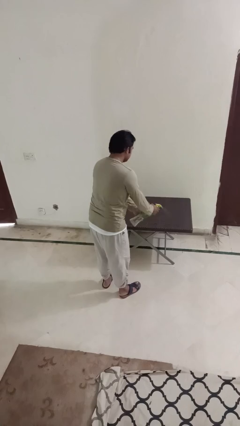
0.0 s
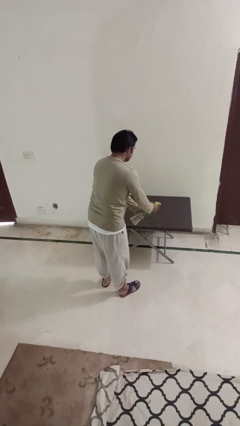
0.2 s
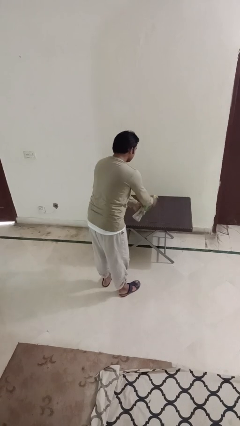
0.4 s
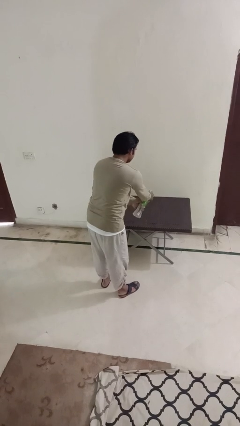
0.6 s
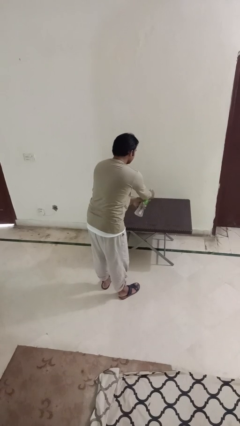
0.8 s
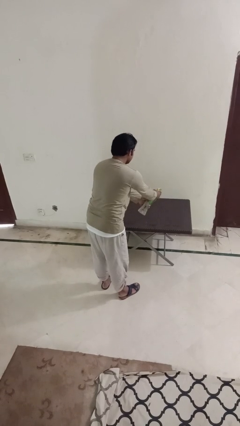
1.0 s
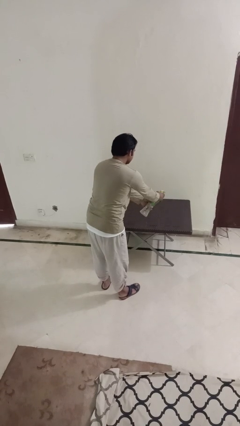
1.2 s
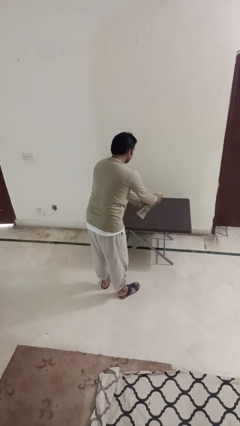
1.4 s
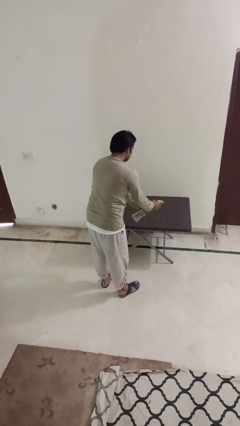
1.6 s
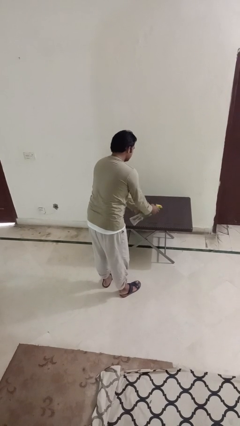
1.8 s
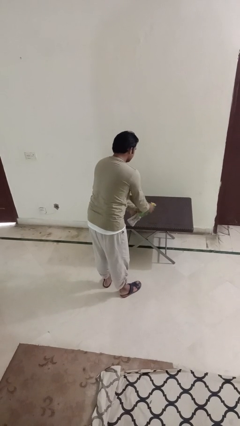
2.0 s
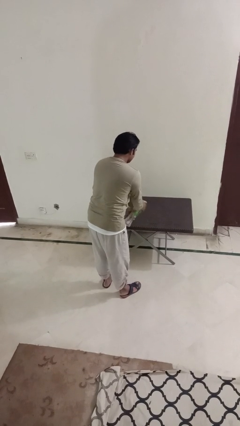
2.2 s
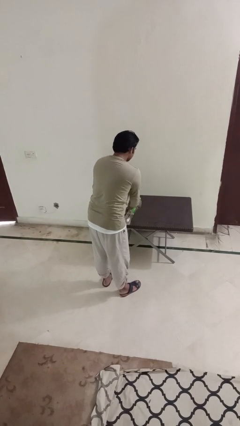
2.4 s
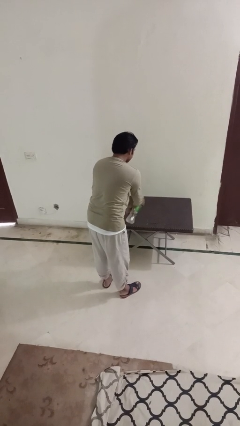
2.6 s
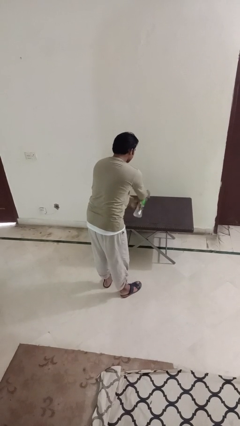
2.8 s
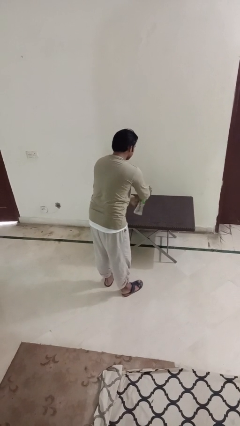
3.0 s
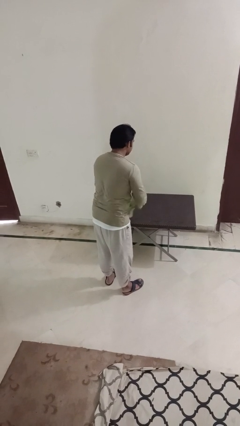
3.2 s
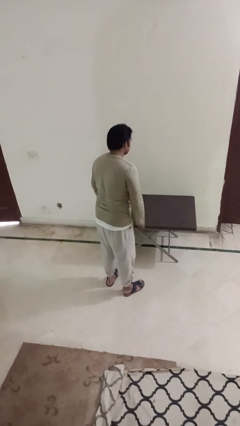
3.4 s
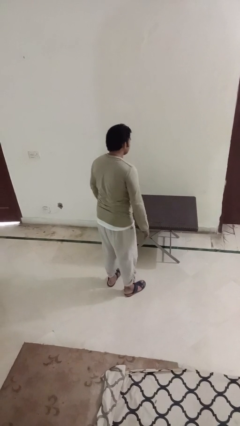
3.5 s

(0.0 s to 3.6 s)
person sprays from bottle

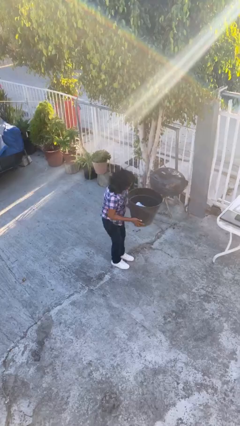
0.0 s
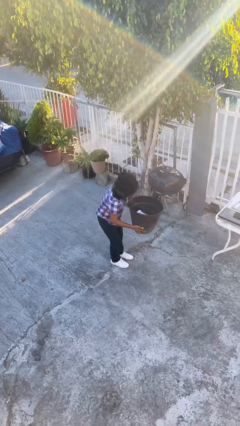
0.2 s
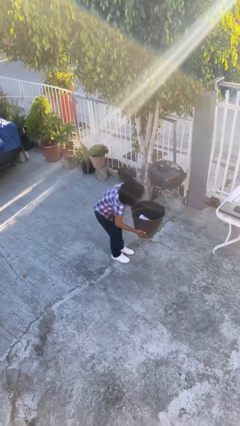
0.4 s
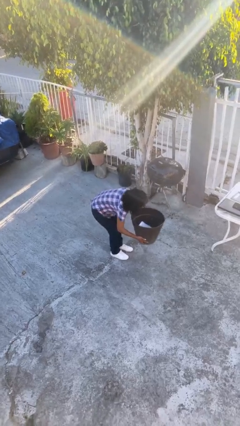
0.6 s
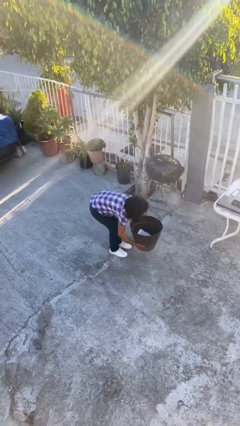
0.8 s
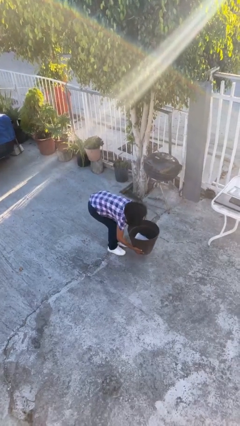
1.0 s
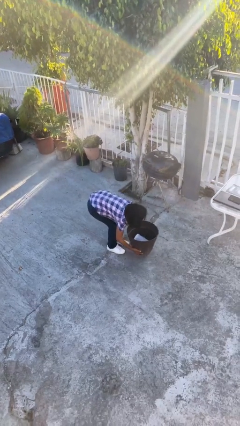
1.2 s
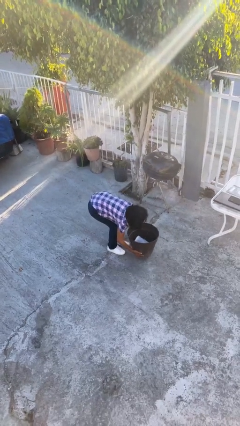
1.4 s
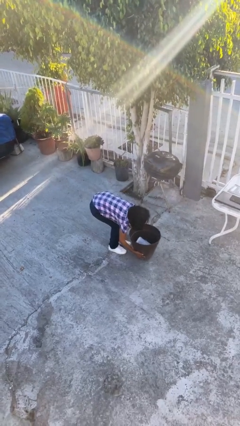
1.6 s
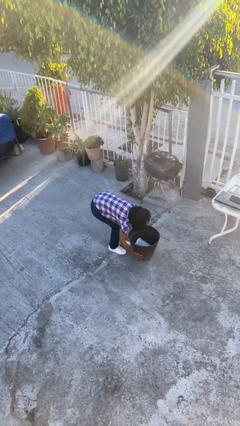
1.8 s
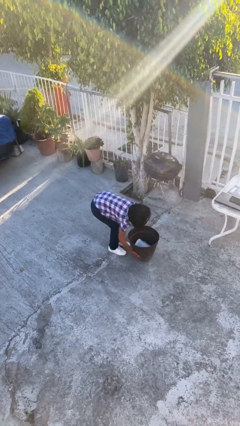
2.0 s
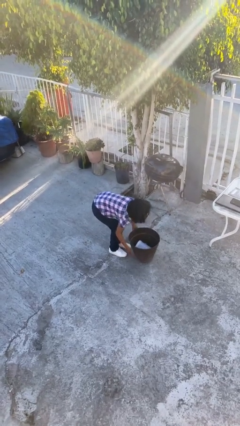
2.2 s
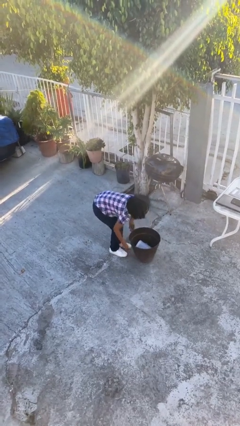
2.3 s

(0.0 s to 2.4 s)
person puts down object on floor

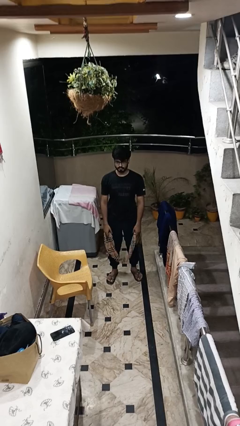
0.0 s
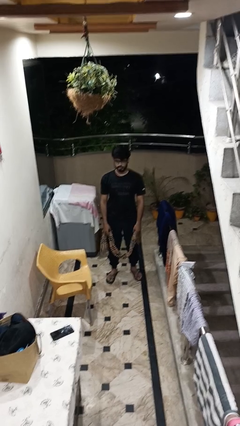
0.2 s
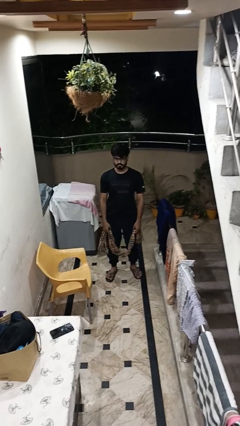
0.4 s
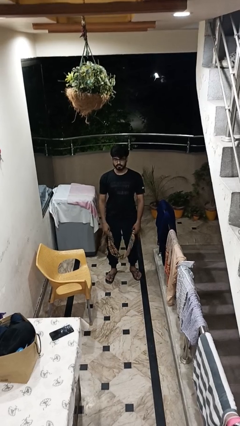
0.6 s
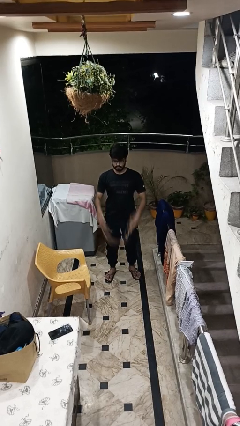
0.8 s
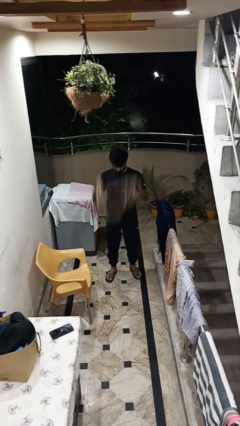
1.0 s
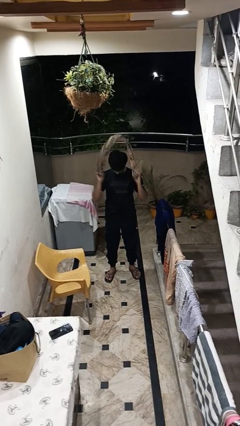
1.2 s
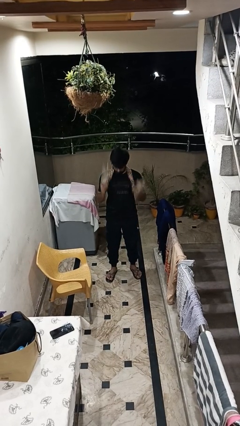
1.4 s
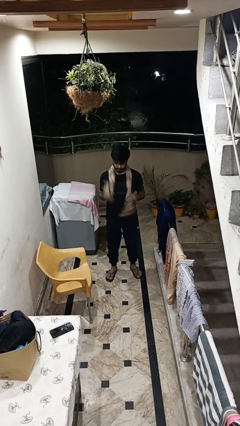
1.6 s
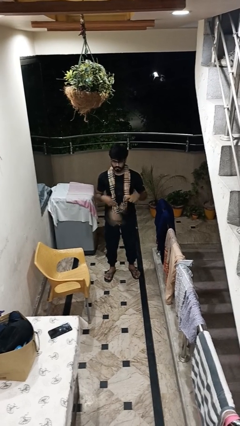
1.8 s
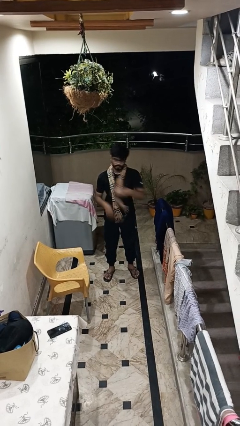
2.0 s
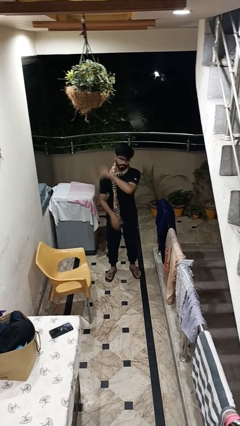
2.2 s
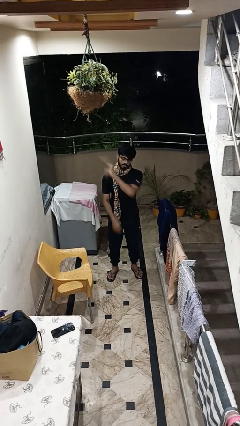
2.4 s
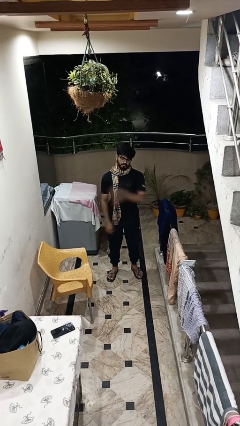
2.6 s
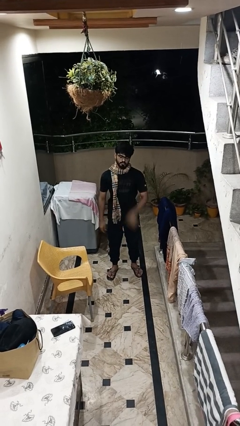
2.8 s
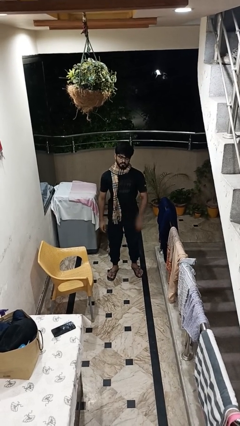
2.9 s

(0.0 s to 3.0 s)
person puts on scarf

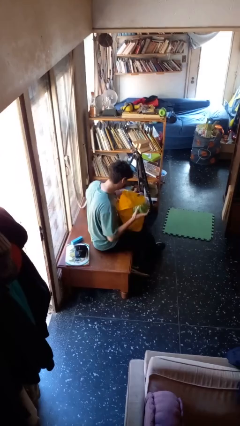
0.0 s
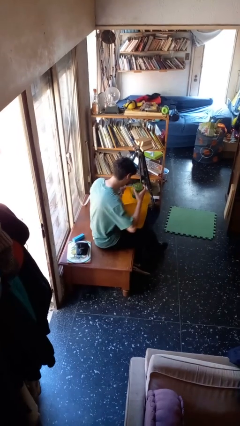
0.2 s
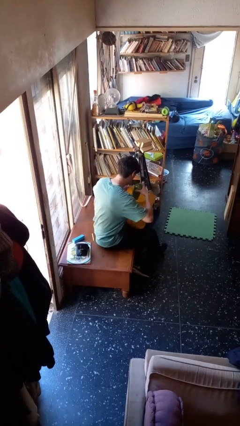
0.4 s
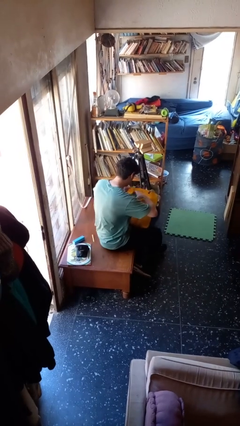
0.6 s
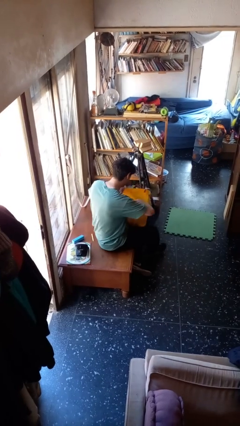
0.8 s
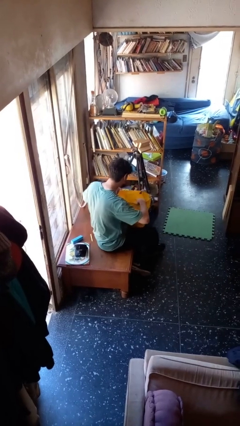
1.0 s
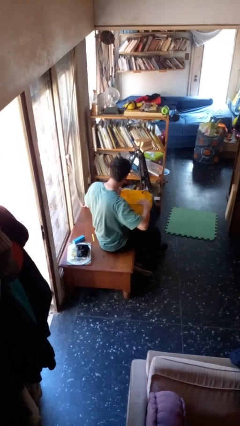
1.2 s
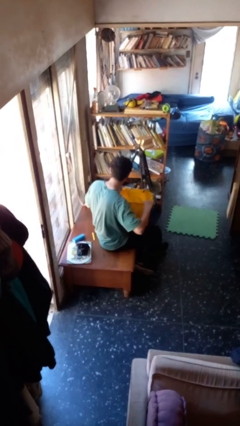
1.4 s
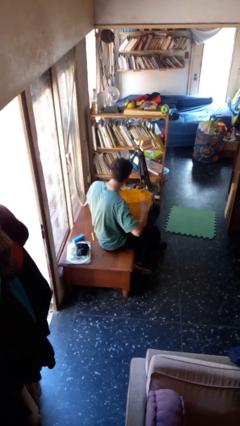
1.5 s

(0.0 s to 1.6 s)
person puts object into bag

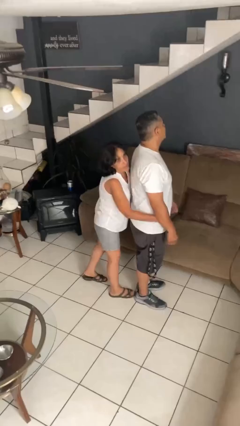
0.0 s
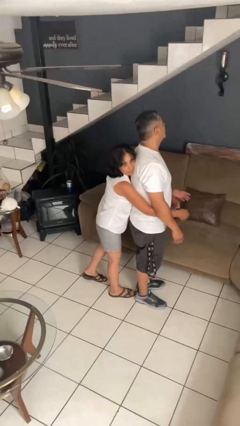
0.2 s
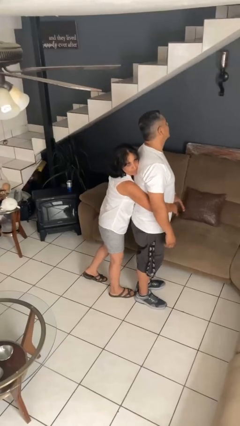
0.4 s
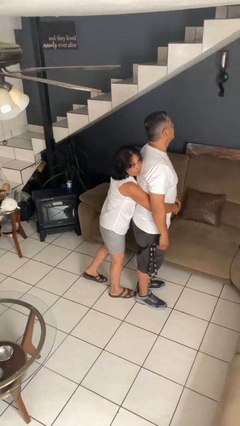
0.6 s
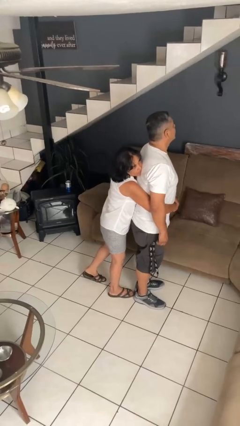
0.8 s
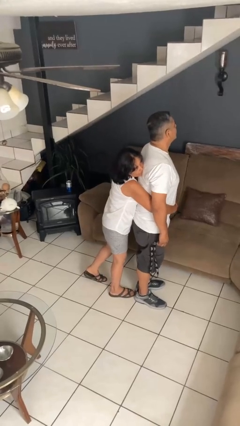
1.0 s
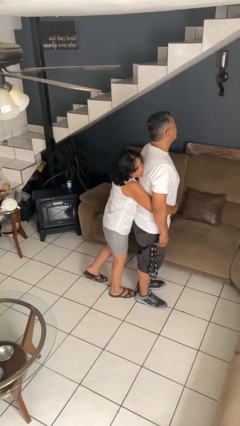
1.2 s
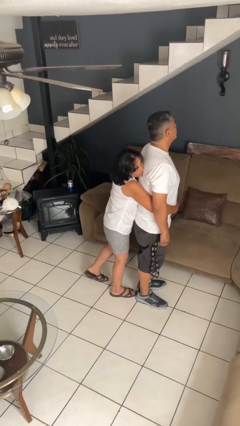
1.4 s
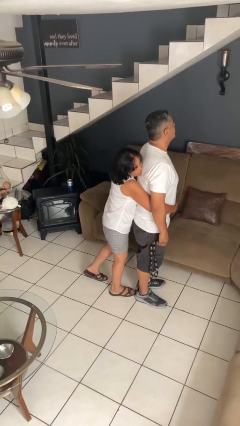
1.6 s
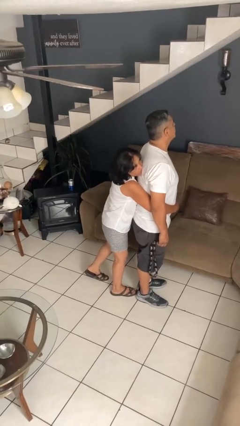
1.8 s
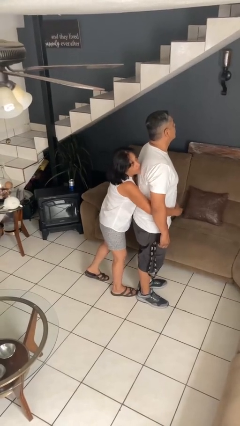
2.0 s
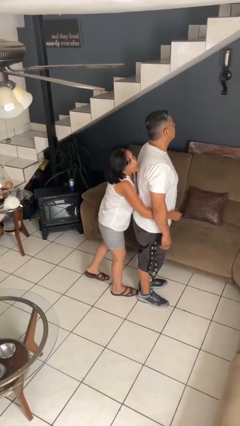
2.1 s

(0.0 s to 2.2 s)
person hugs person from behind

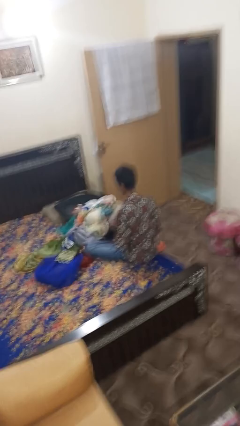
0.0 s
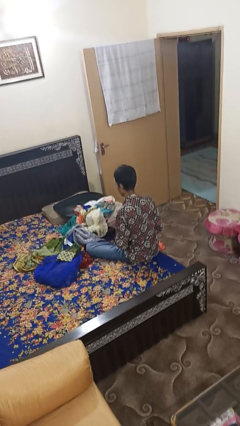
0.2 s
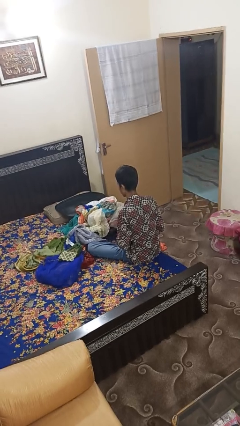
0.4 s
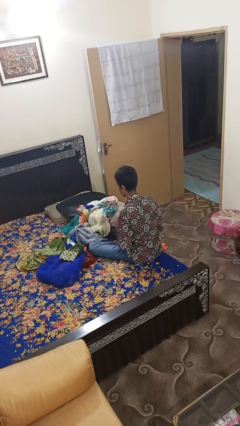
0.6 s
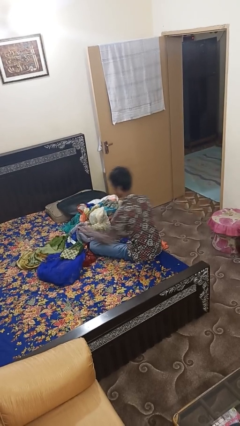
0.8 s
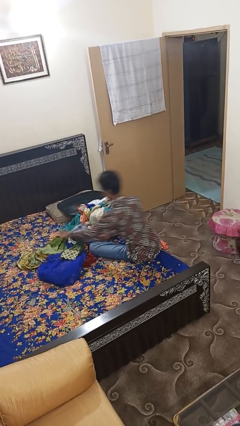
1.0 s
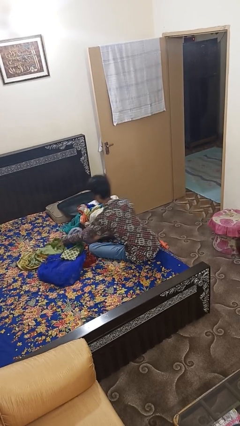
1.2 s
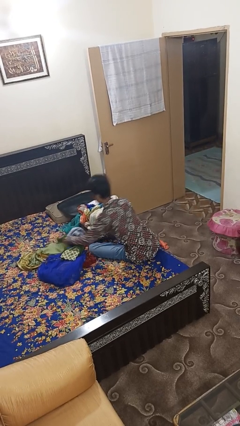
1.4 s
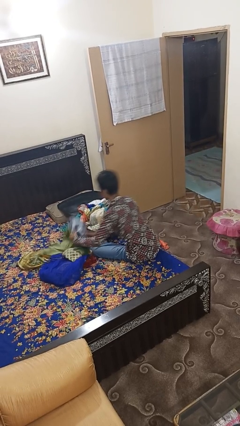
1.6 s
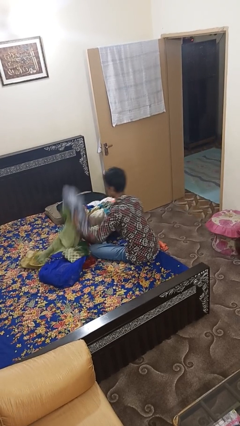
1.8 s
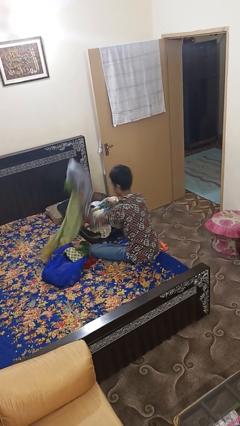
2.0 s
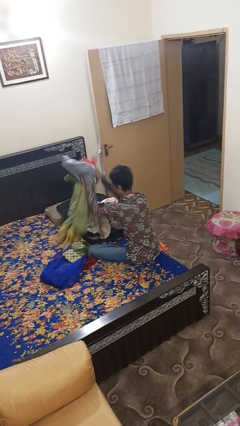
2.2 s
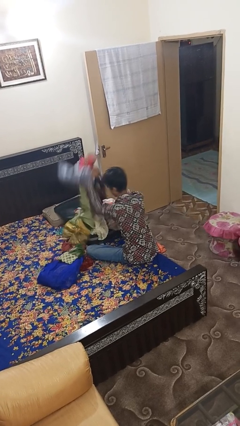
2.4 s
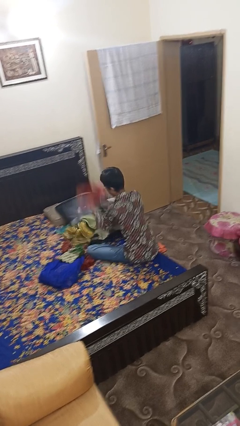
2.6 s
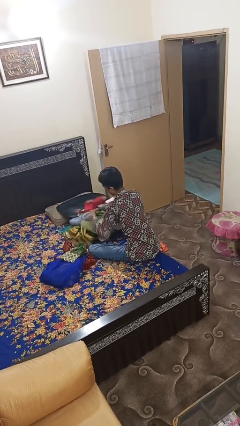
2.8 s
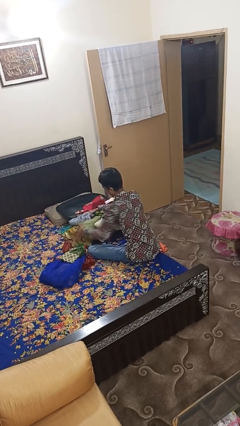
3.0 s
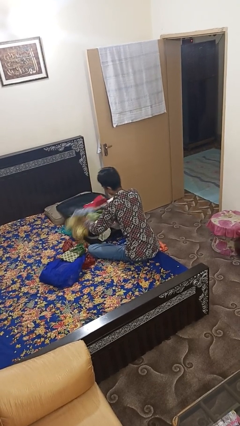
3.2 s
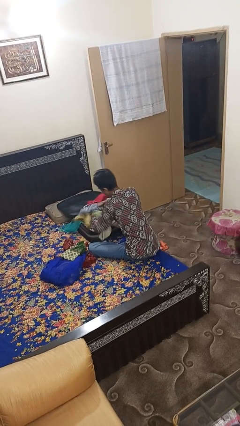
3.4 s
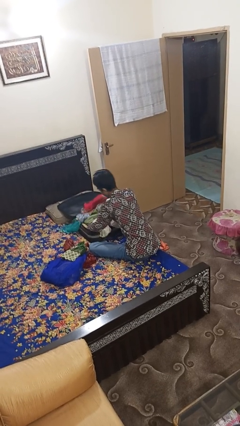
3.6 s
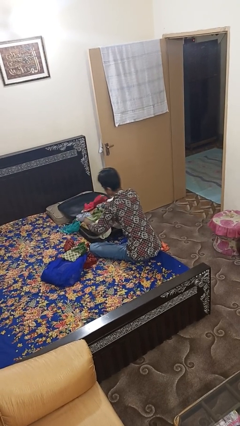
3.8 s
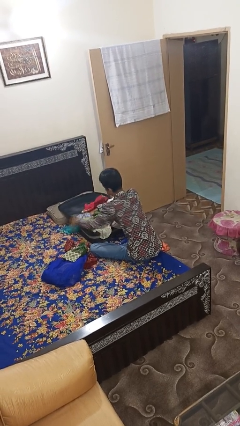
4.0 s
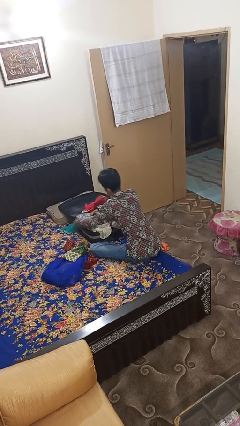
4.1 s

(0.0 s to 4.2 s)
person loads clothes into suitcase

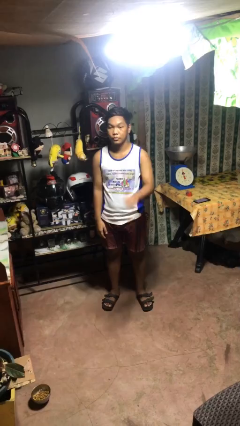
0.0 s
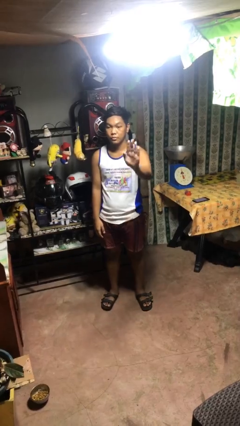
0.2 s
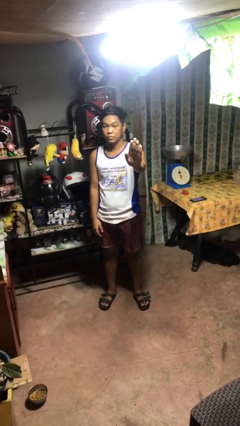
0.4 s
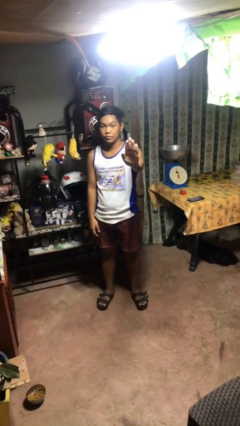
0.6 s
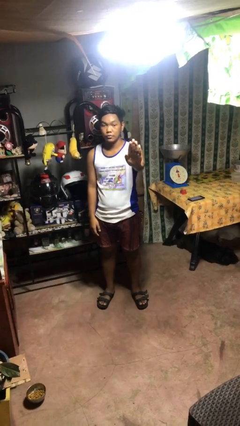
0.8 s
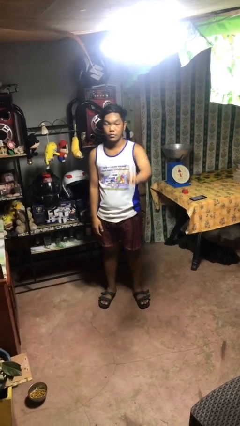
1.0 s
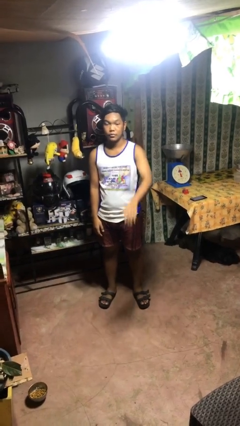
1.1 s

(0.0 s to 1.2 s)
person gestures stop
